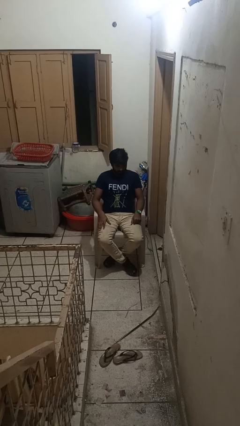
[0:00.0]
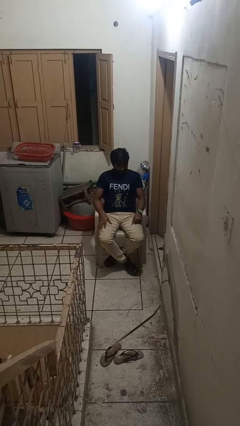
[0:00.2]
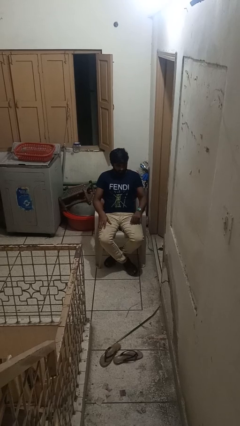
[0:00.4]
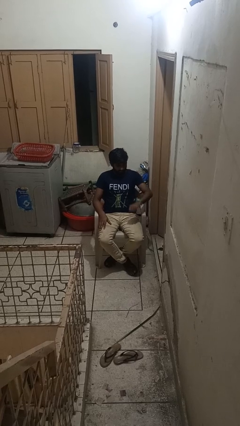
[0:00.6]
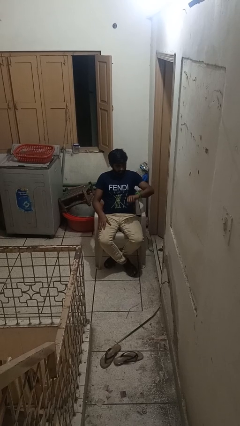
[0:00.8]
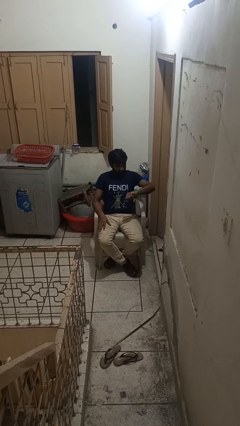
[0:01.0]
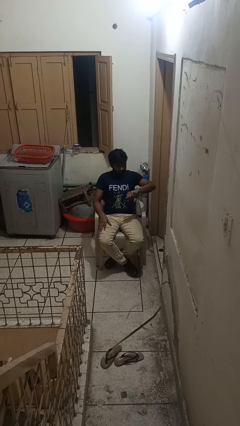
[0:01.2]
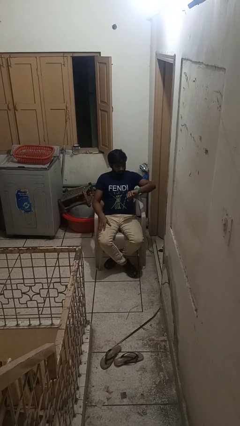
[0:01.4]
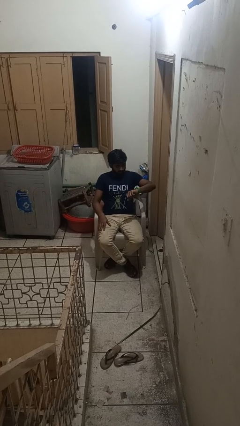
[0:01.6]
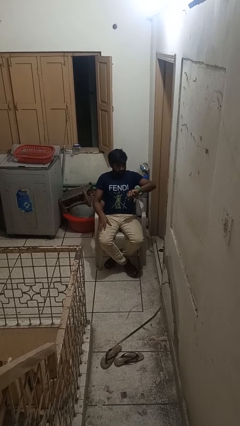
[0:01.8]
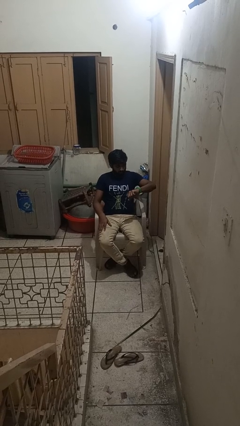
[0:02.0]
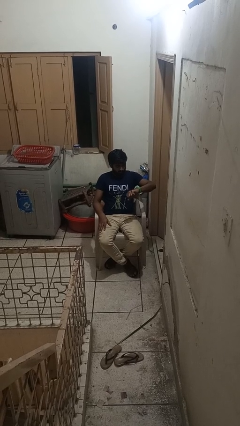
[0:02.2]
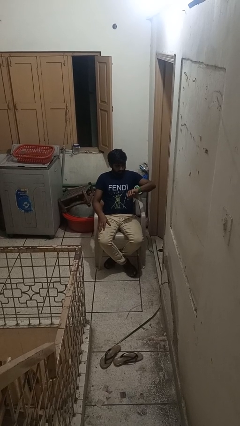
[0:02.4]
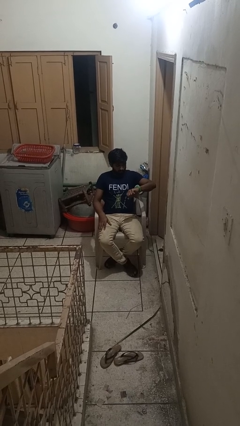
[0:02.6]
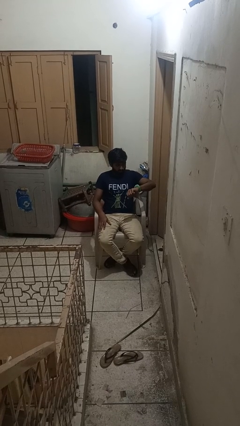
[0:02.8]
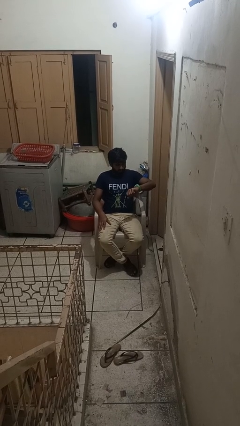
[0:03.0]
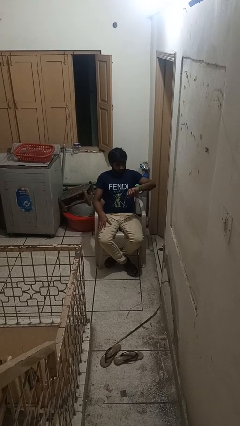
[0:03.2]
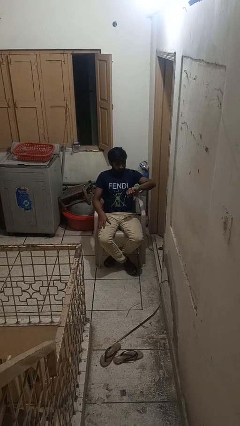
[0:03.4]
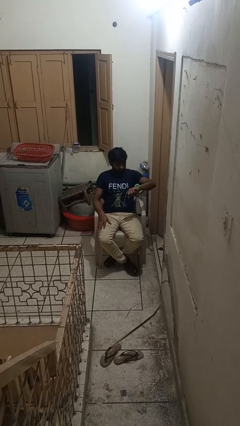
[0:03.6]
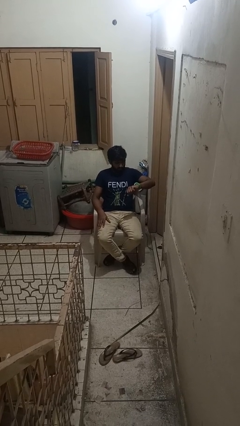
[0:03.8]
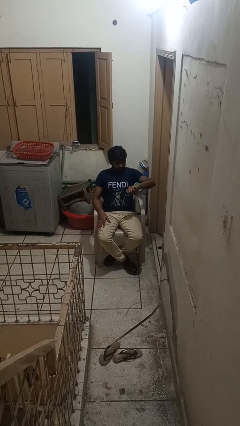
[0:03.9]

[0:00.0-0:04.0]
person looks at wristwatch

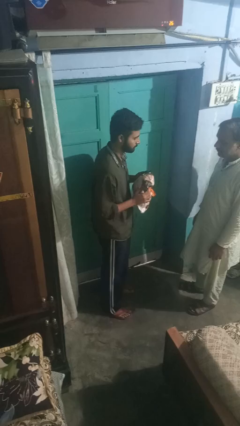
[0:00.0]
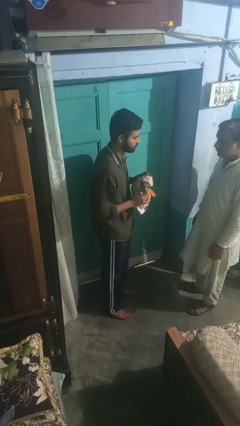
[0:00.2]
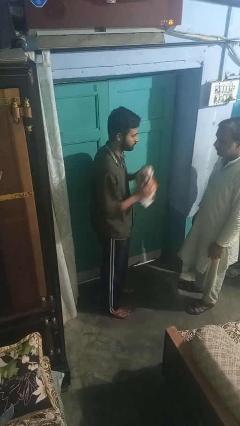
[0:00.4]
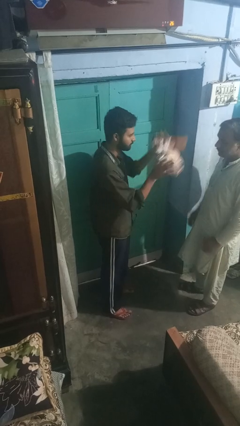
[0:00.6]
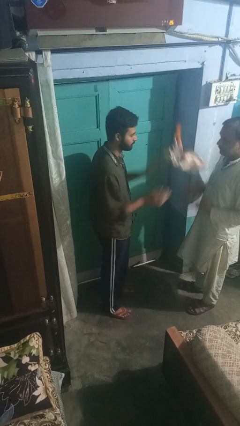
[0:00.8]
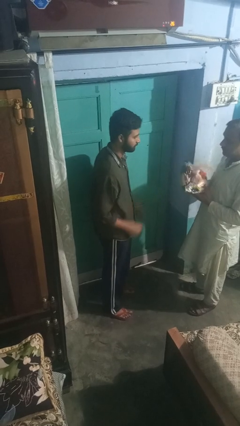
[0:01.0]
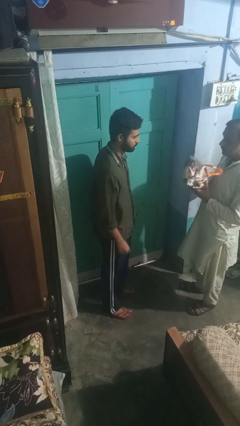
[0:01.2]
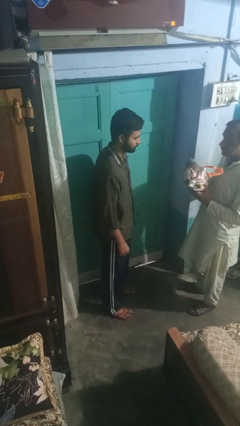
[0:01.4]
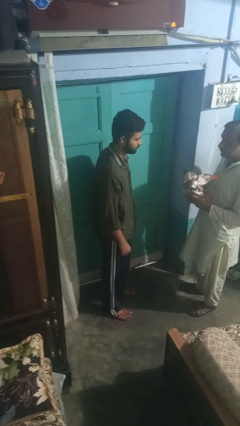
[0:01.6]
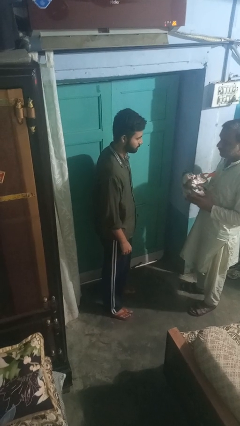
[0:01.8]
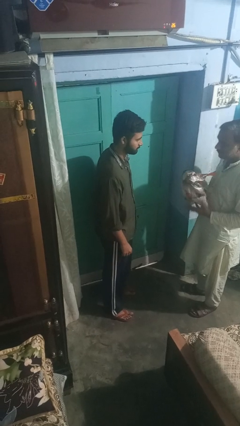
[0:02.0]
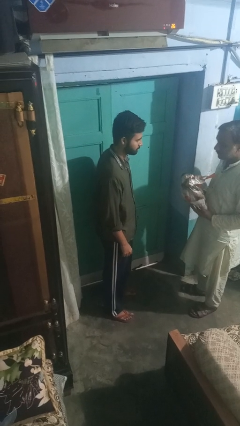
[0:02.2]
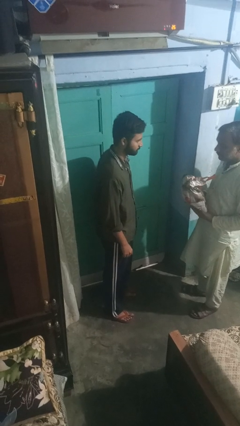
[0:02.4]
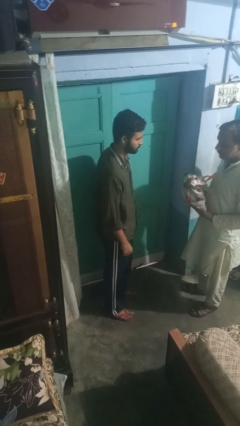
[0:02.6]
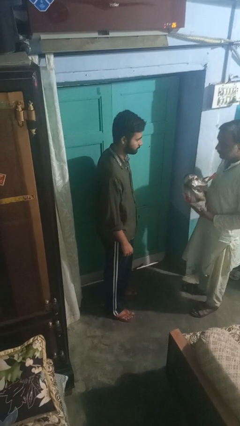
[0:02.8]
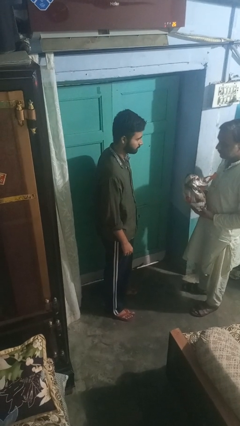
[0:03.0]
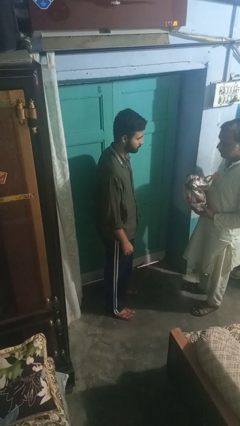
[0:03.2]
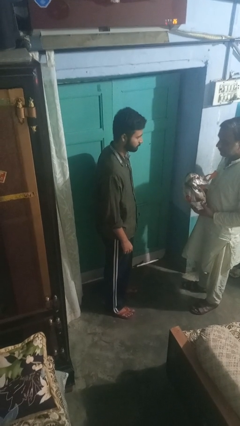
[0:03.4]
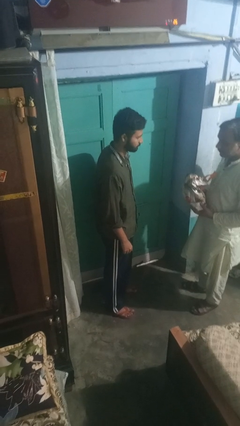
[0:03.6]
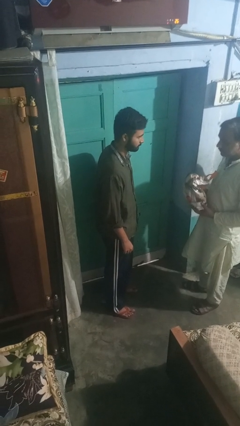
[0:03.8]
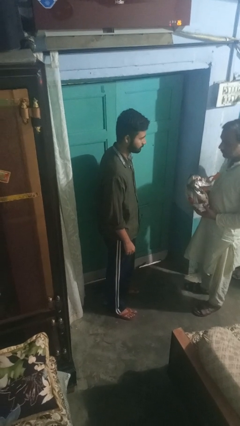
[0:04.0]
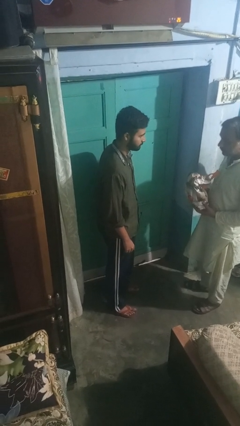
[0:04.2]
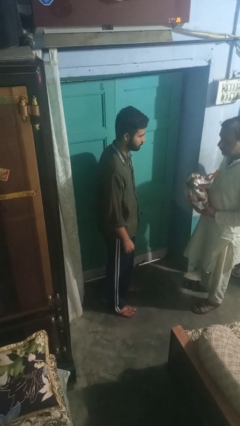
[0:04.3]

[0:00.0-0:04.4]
person throws object to person

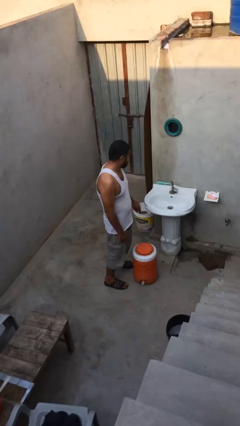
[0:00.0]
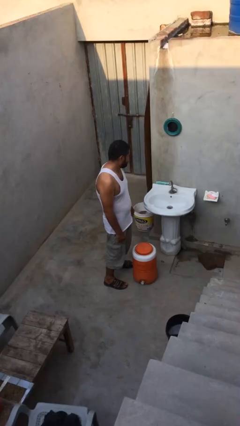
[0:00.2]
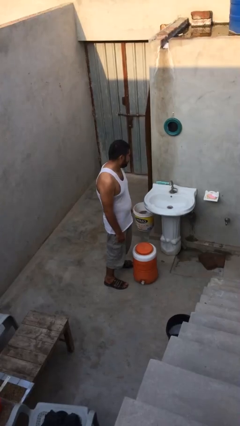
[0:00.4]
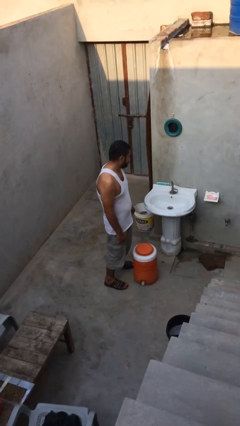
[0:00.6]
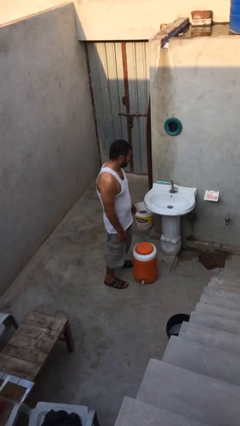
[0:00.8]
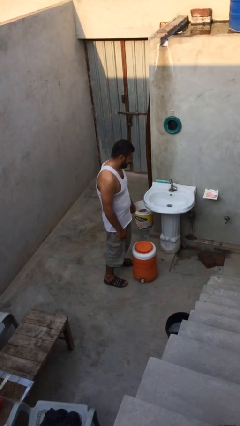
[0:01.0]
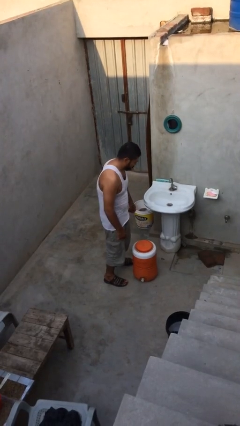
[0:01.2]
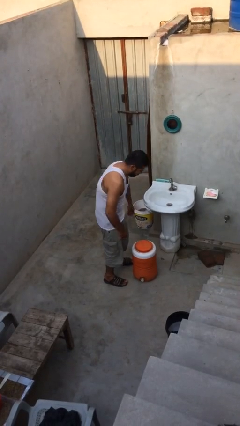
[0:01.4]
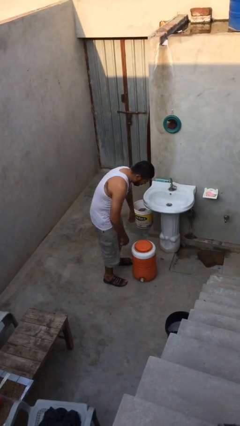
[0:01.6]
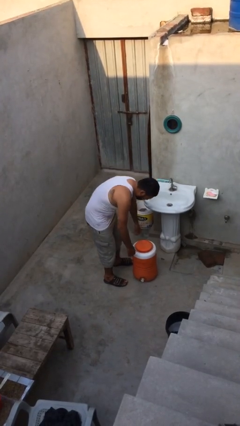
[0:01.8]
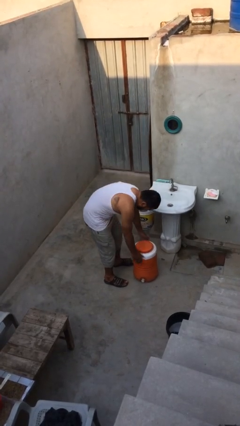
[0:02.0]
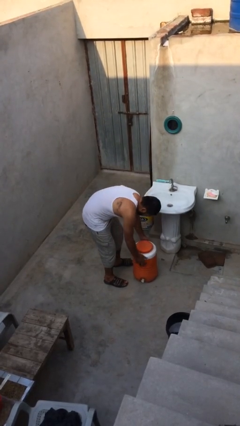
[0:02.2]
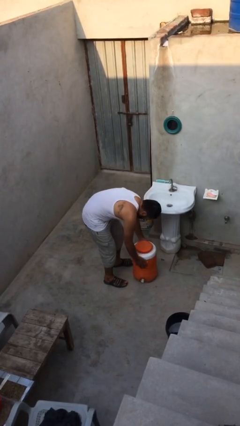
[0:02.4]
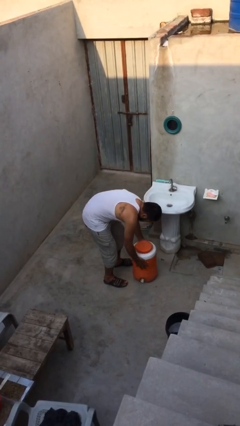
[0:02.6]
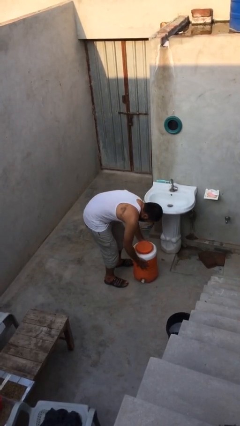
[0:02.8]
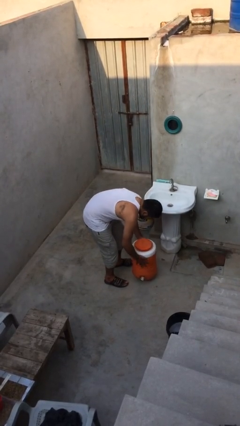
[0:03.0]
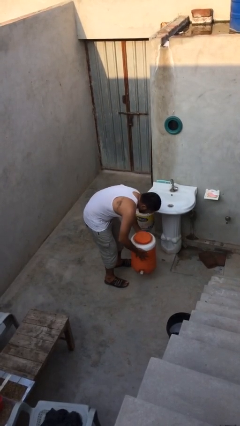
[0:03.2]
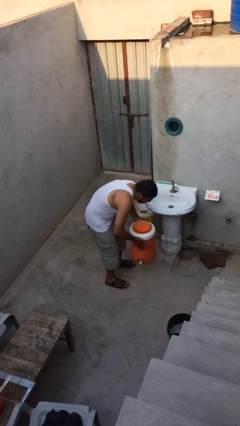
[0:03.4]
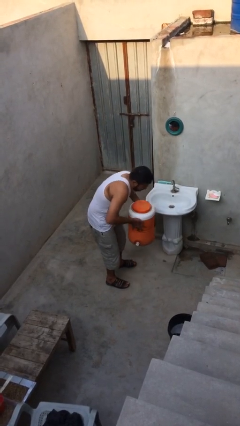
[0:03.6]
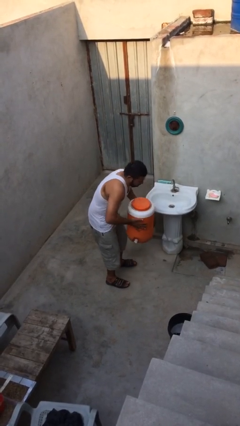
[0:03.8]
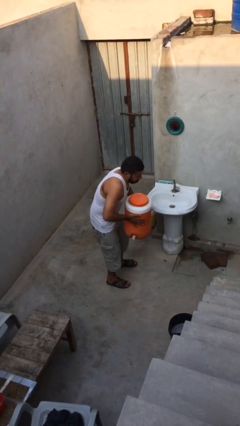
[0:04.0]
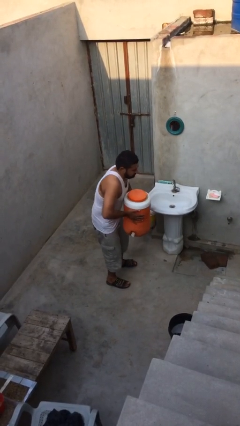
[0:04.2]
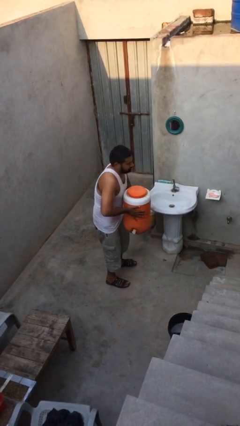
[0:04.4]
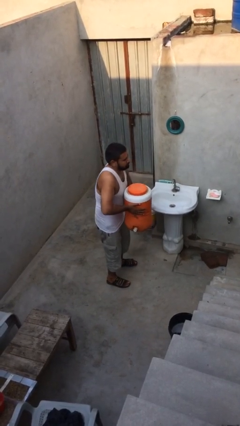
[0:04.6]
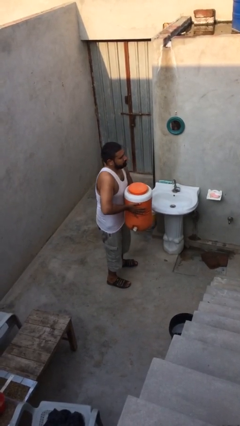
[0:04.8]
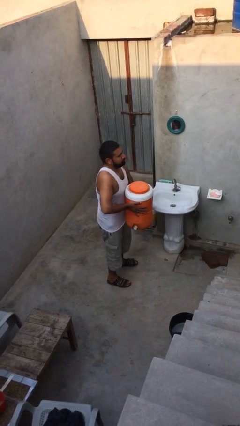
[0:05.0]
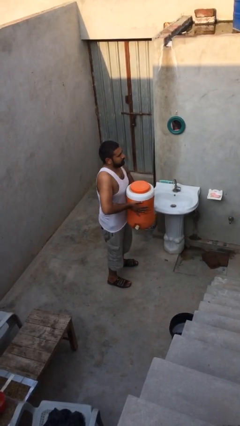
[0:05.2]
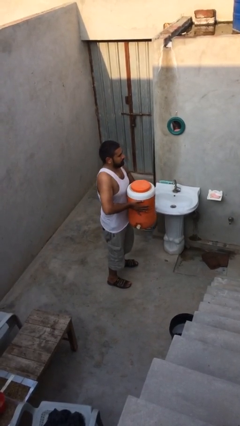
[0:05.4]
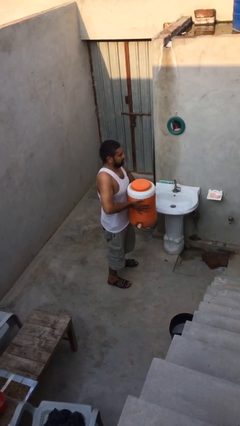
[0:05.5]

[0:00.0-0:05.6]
person picks up object from floor

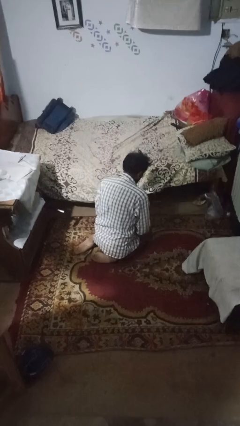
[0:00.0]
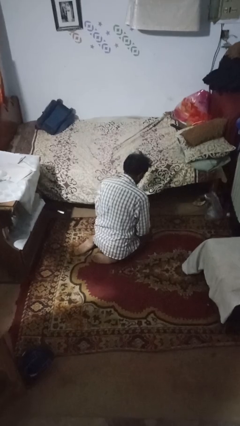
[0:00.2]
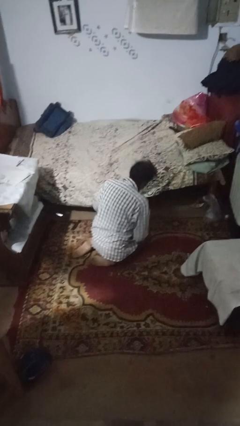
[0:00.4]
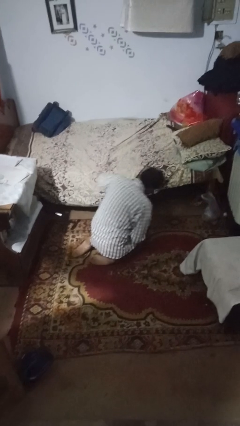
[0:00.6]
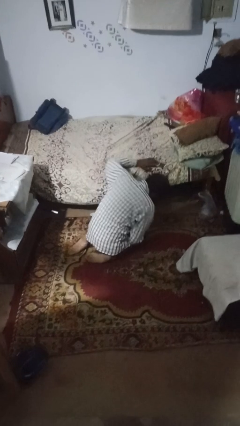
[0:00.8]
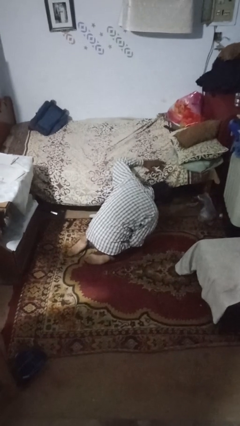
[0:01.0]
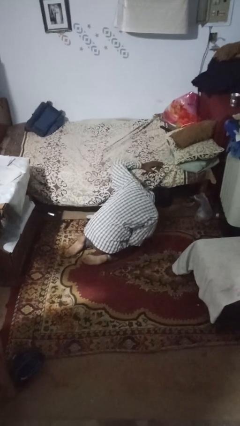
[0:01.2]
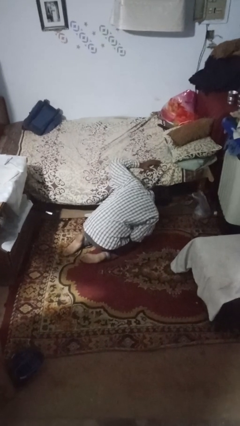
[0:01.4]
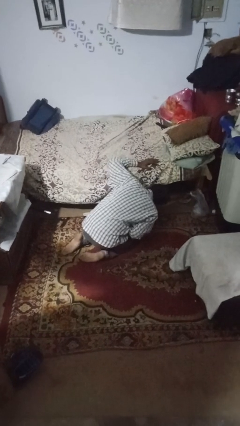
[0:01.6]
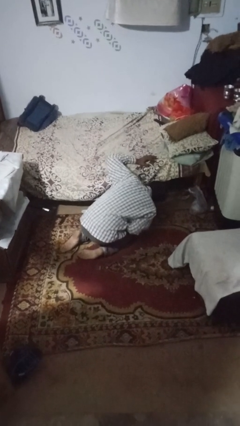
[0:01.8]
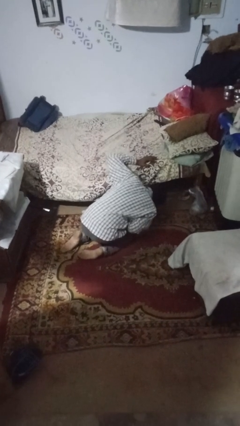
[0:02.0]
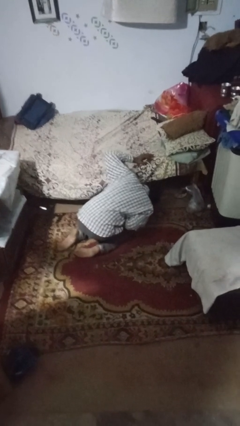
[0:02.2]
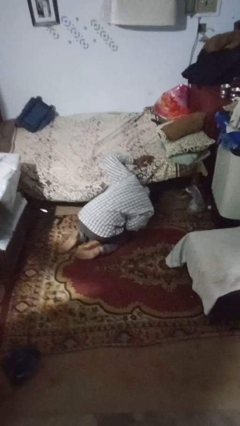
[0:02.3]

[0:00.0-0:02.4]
person searches under bed

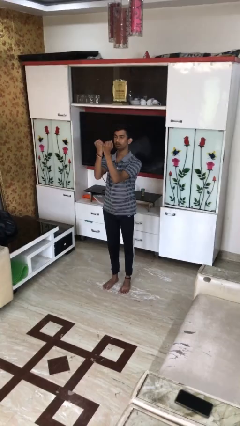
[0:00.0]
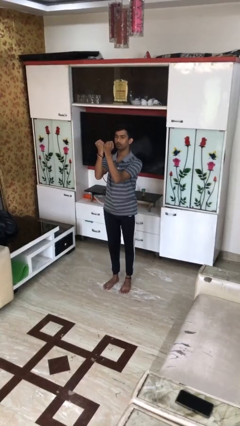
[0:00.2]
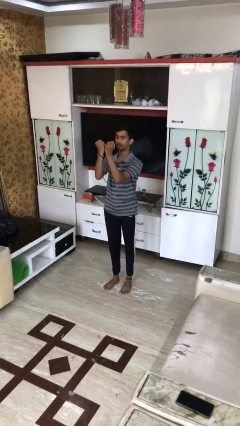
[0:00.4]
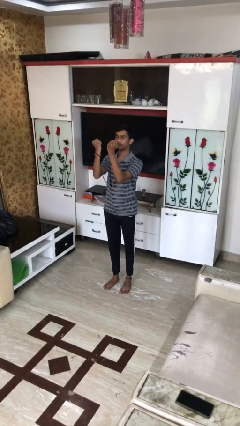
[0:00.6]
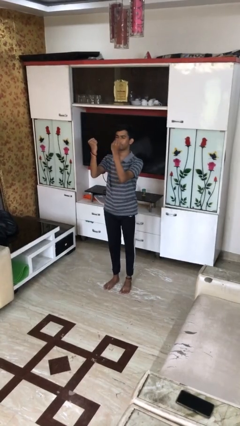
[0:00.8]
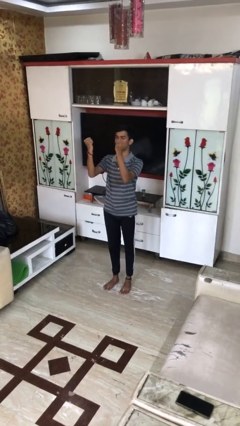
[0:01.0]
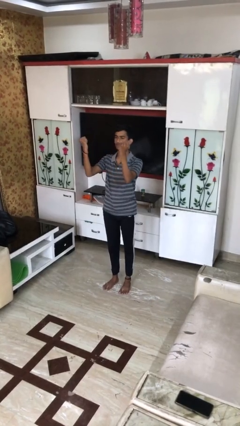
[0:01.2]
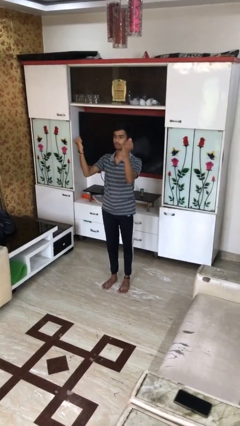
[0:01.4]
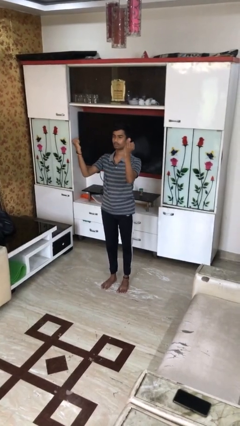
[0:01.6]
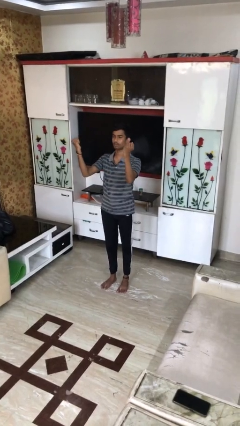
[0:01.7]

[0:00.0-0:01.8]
person gestures zoom in
